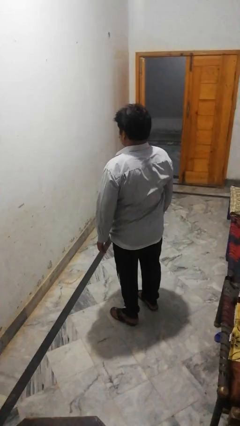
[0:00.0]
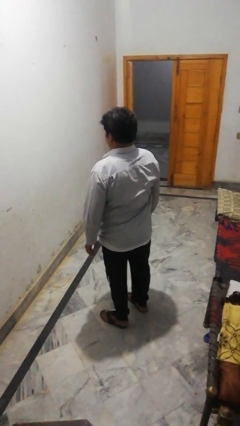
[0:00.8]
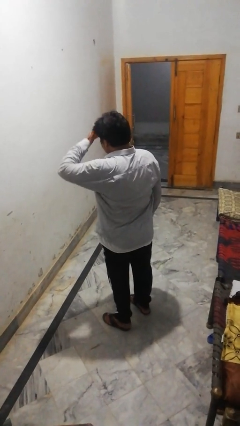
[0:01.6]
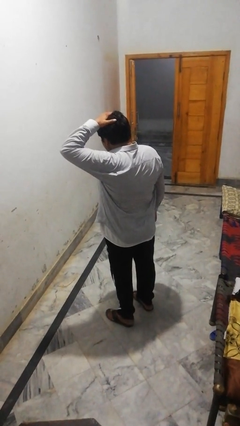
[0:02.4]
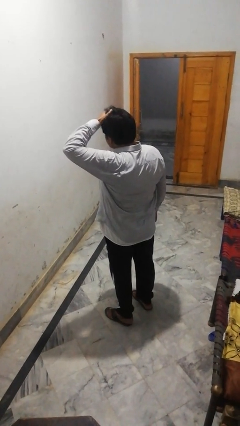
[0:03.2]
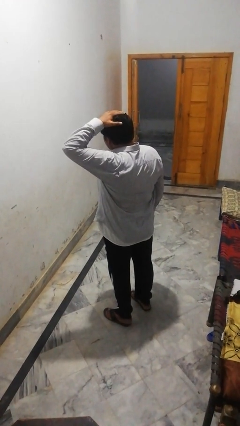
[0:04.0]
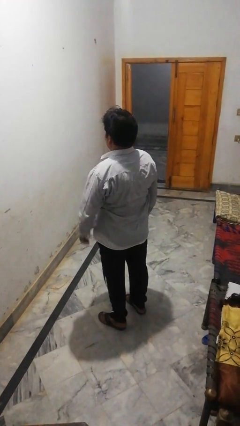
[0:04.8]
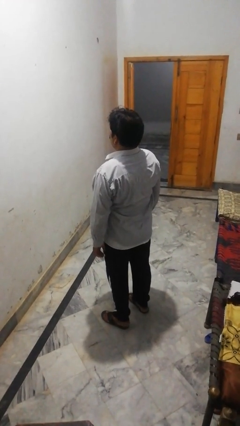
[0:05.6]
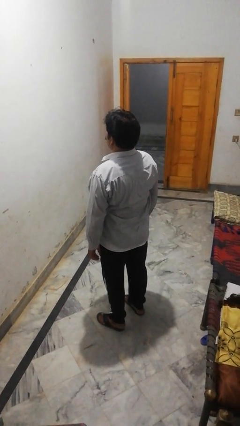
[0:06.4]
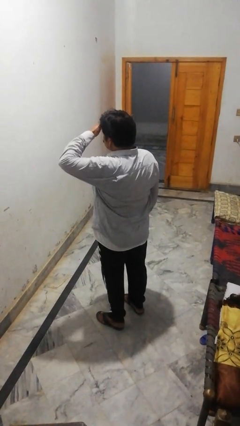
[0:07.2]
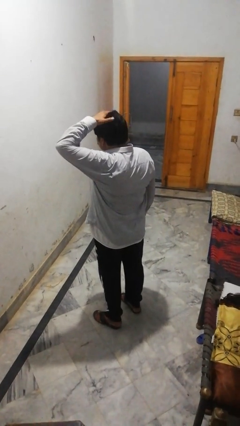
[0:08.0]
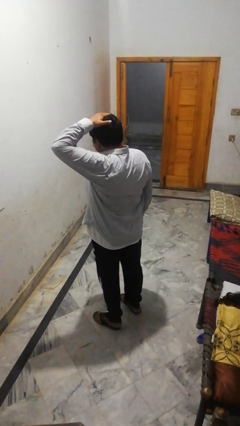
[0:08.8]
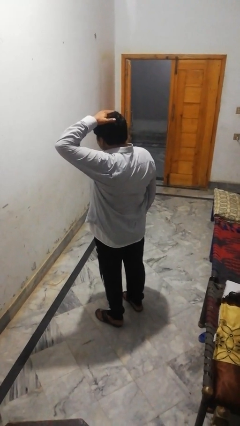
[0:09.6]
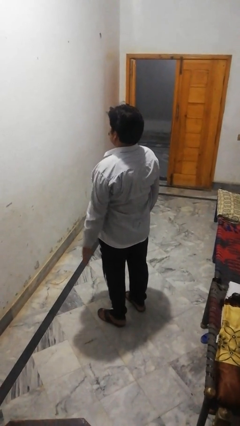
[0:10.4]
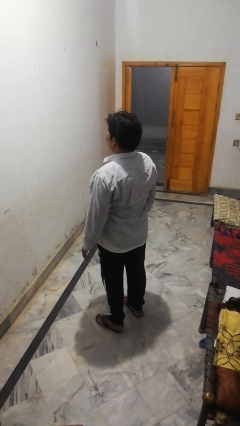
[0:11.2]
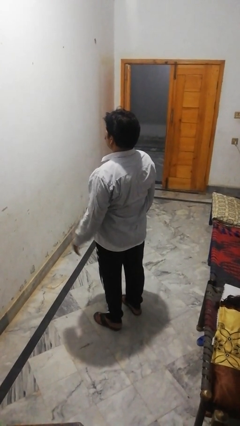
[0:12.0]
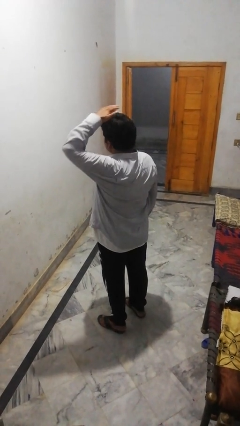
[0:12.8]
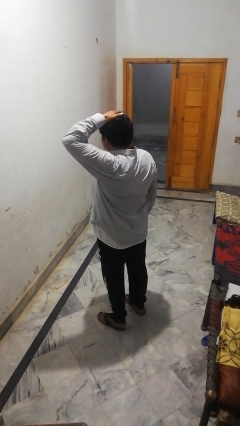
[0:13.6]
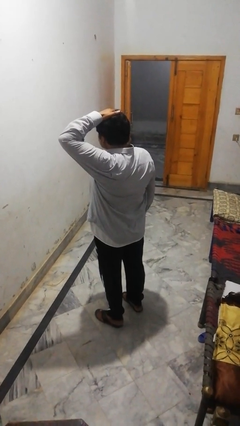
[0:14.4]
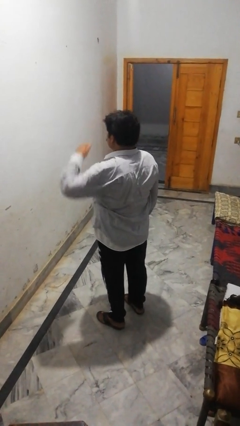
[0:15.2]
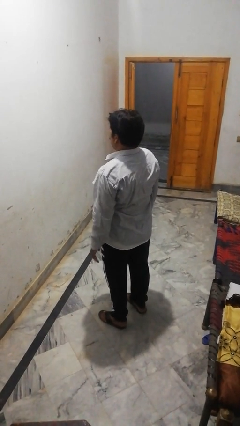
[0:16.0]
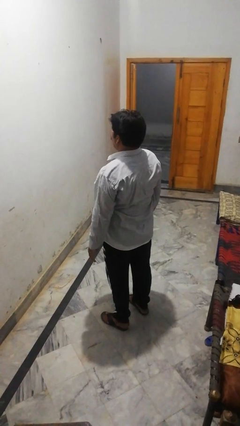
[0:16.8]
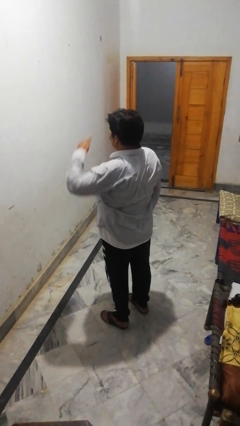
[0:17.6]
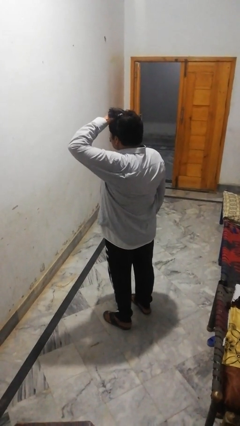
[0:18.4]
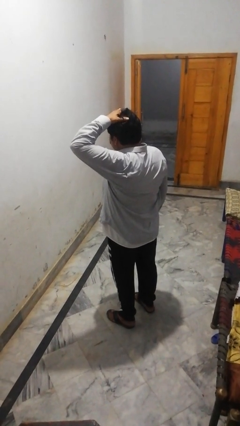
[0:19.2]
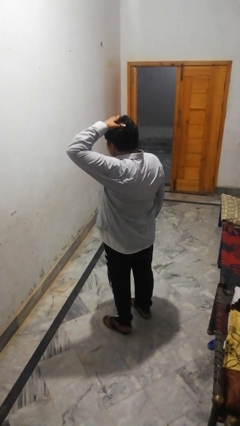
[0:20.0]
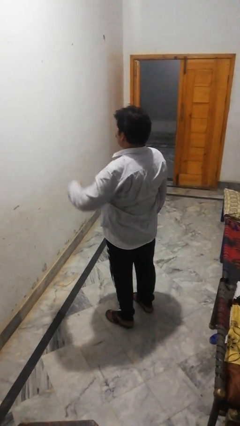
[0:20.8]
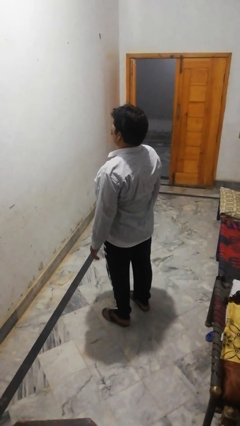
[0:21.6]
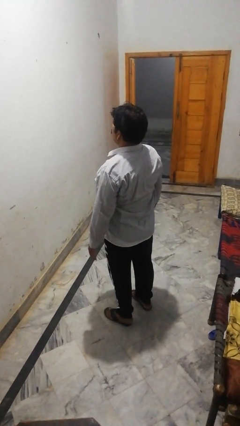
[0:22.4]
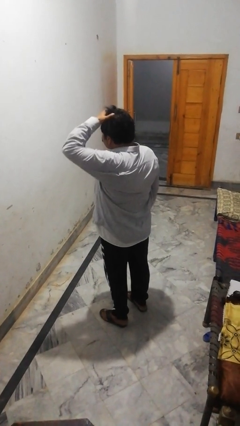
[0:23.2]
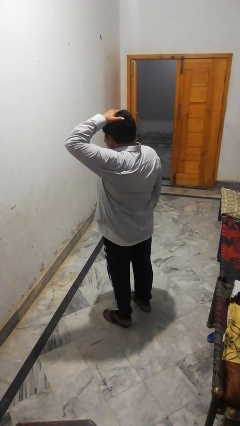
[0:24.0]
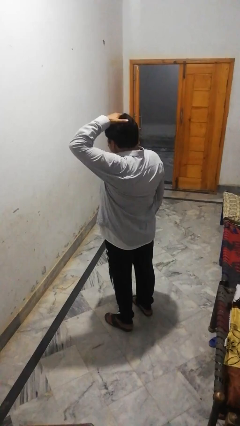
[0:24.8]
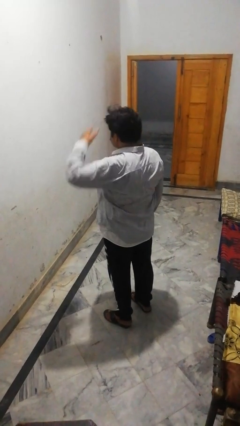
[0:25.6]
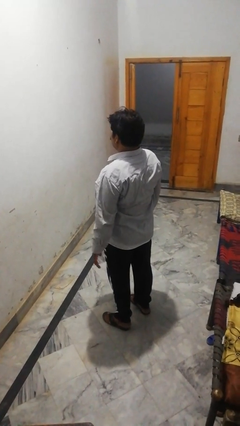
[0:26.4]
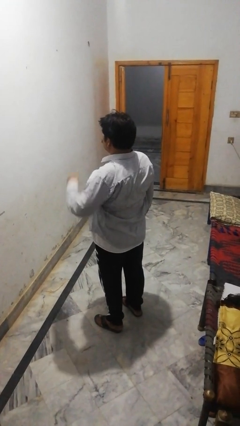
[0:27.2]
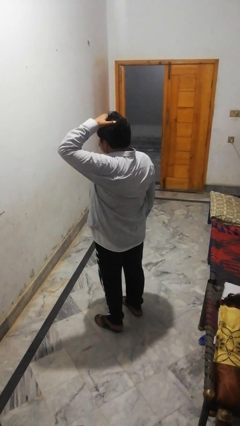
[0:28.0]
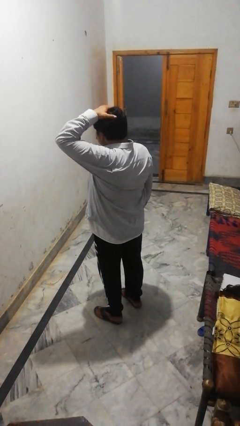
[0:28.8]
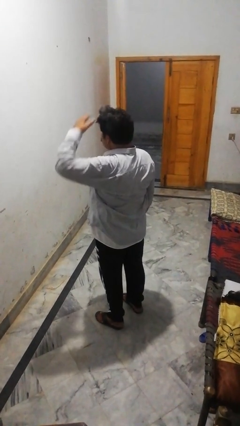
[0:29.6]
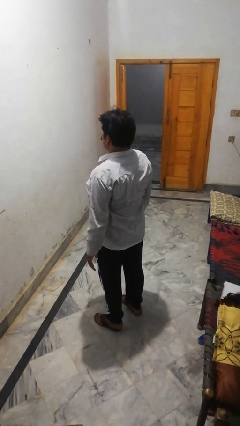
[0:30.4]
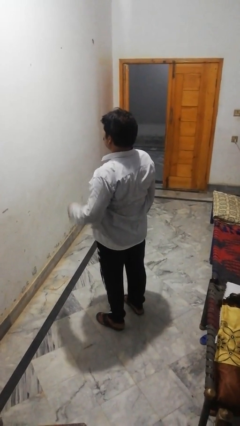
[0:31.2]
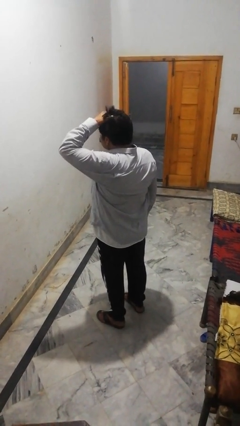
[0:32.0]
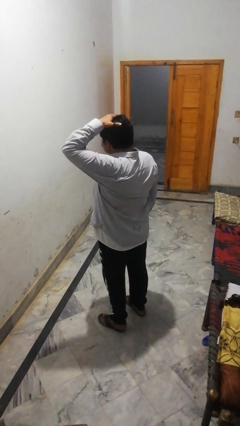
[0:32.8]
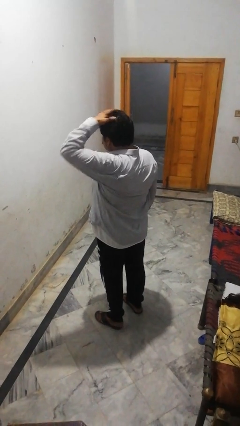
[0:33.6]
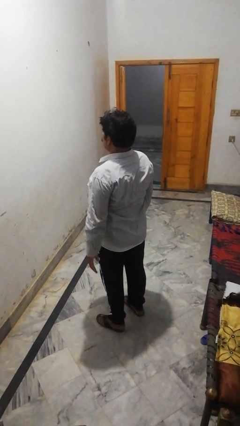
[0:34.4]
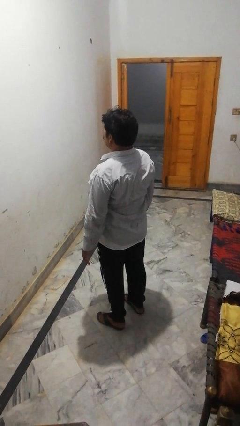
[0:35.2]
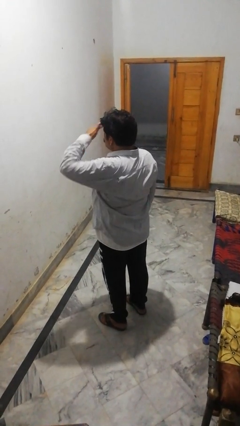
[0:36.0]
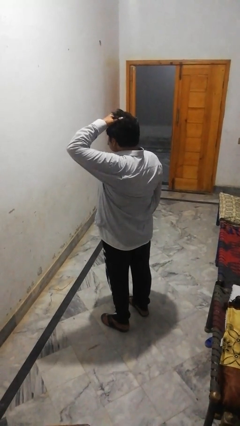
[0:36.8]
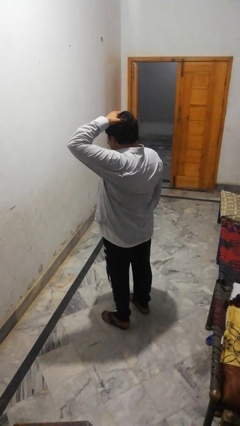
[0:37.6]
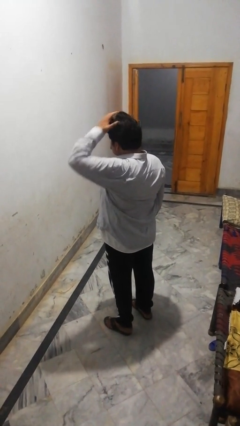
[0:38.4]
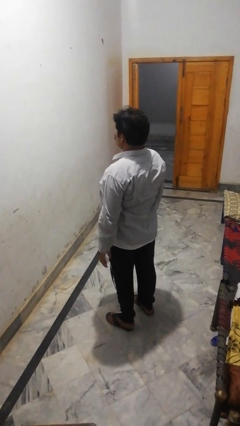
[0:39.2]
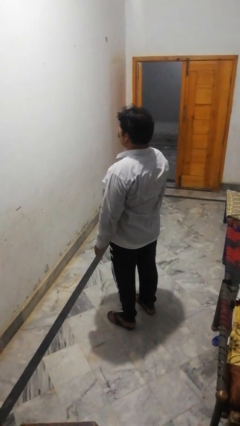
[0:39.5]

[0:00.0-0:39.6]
person pats head

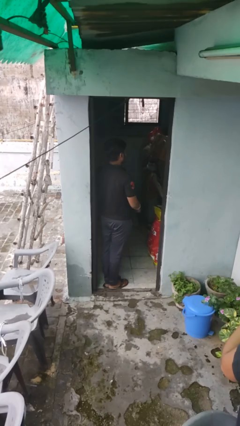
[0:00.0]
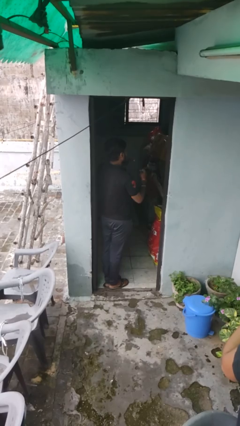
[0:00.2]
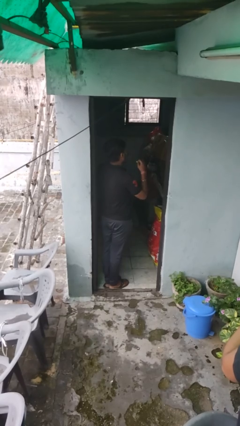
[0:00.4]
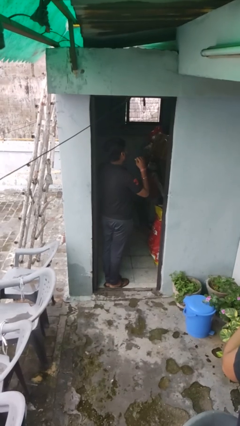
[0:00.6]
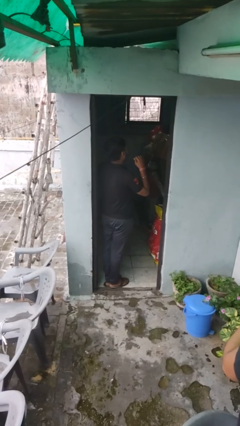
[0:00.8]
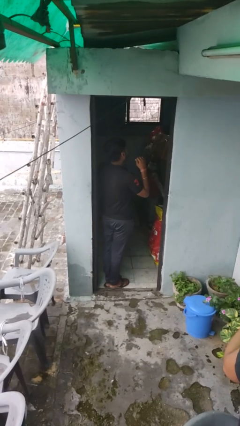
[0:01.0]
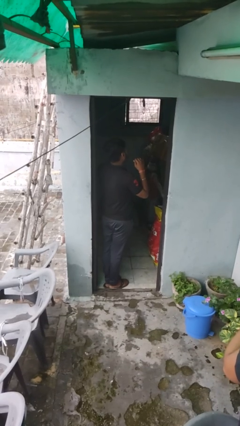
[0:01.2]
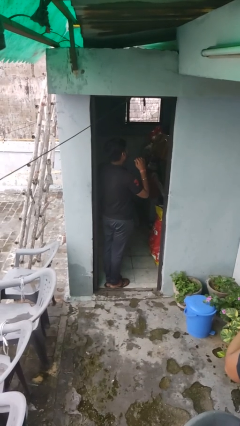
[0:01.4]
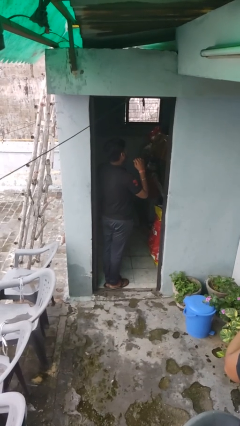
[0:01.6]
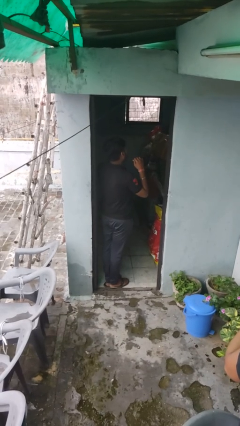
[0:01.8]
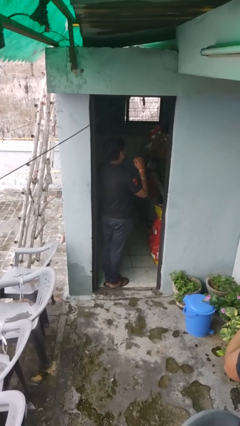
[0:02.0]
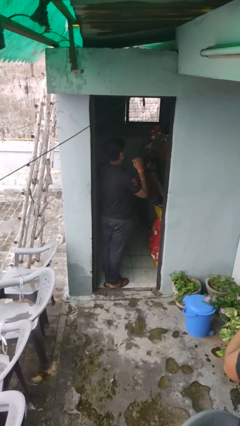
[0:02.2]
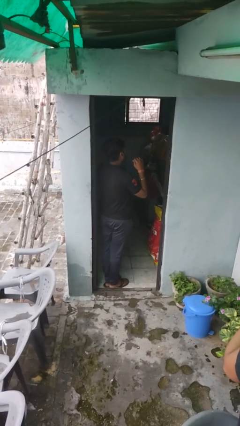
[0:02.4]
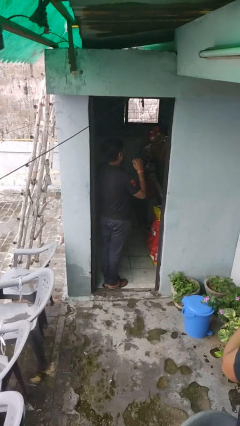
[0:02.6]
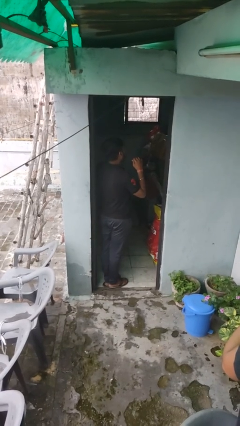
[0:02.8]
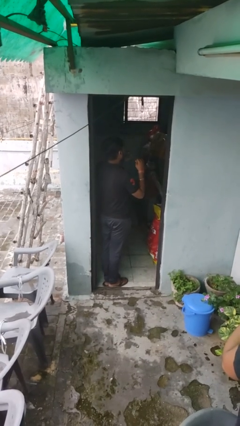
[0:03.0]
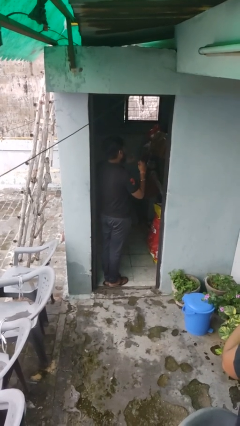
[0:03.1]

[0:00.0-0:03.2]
person flosses

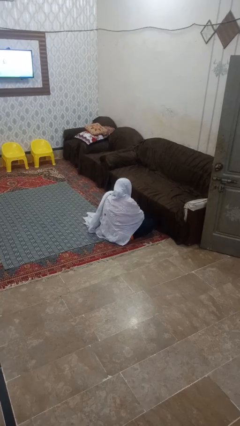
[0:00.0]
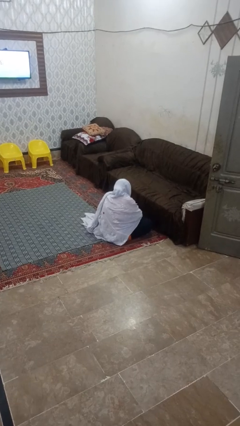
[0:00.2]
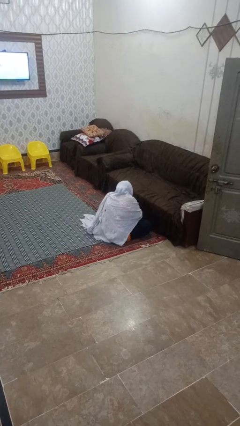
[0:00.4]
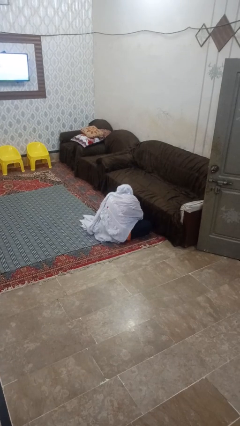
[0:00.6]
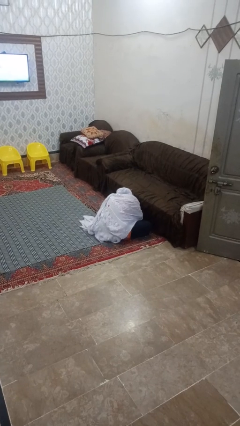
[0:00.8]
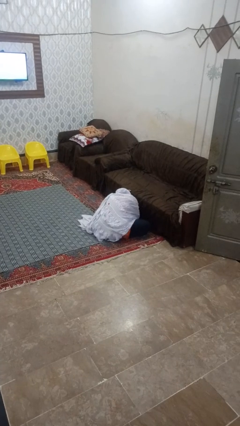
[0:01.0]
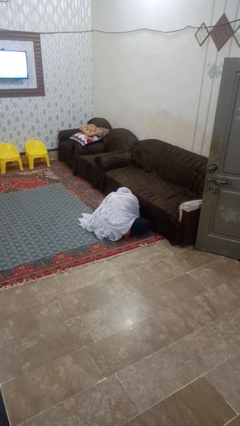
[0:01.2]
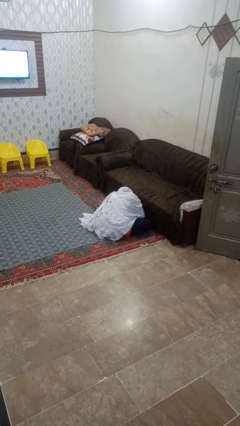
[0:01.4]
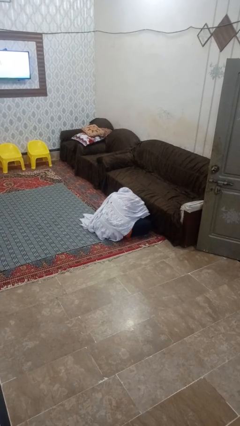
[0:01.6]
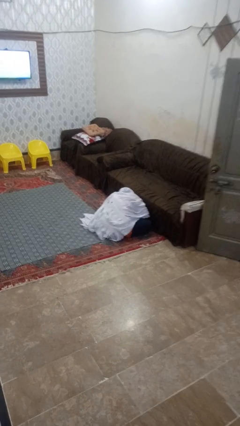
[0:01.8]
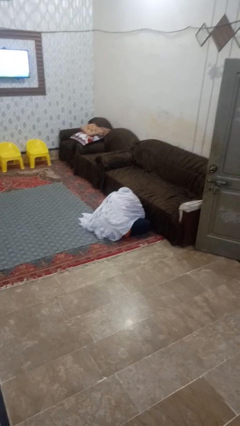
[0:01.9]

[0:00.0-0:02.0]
person searches under couch

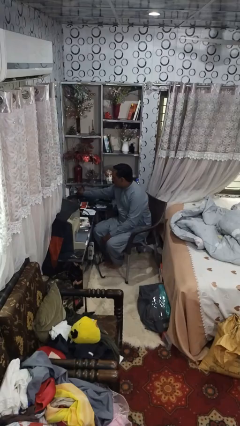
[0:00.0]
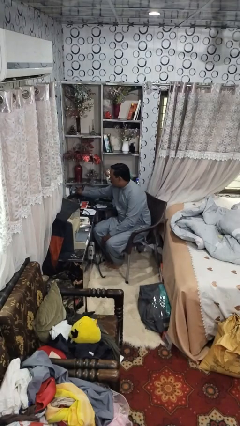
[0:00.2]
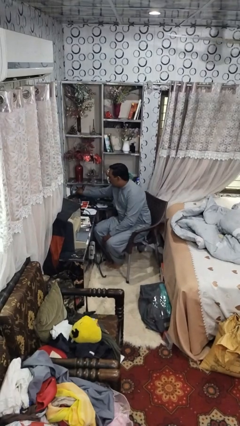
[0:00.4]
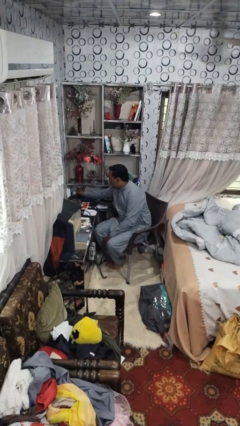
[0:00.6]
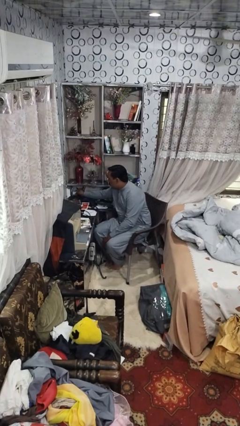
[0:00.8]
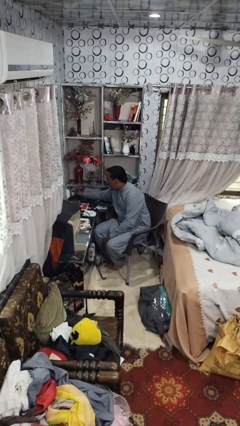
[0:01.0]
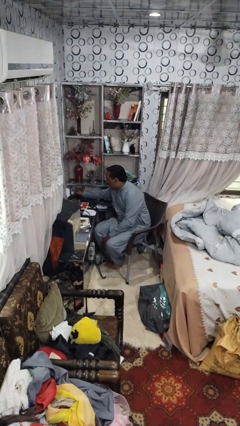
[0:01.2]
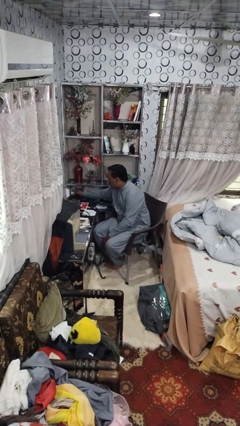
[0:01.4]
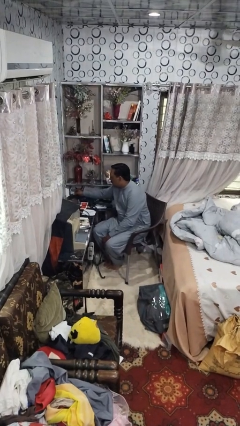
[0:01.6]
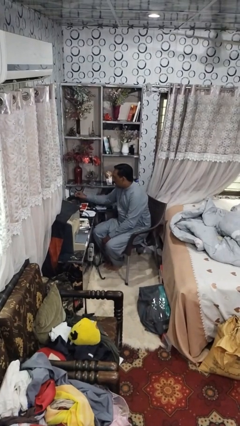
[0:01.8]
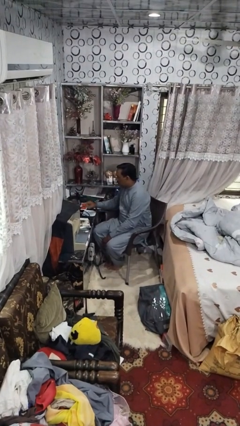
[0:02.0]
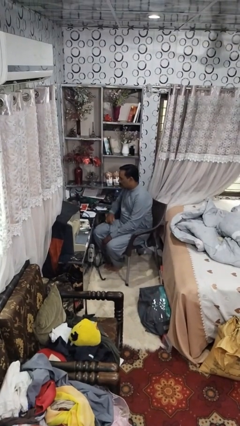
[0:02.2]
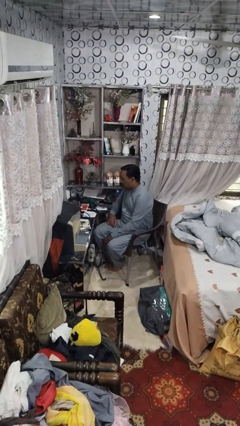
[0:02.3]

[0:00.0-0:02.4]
person plugs into electrical socket

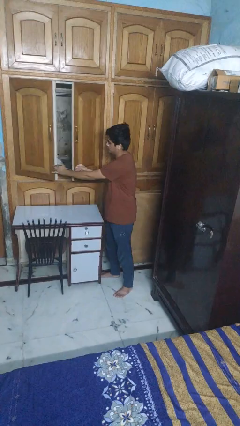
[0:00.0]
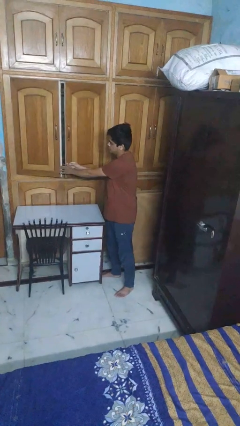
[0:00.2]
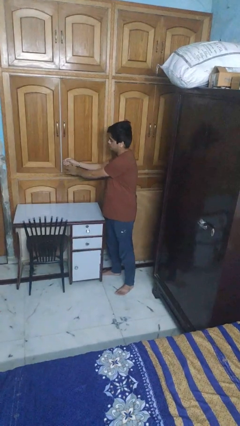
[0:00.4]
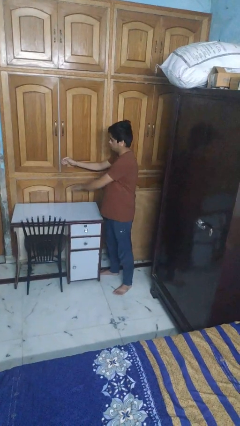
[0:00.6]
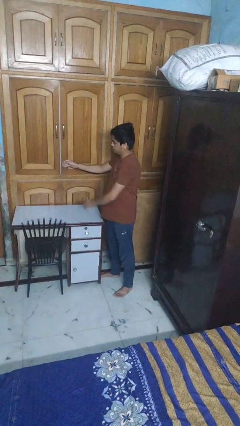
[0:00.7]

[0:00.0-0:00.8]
person closes closet door
